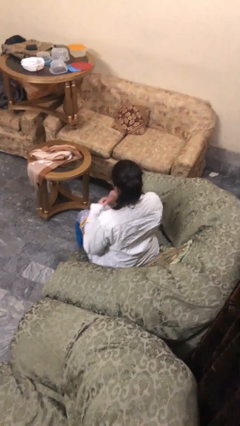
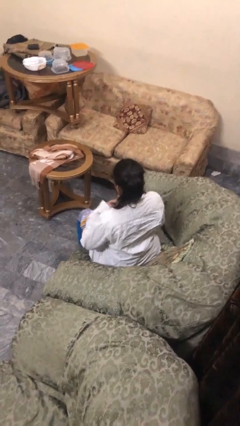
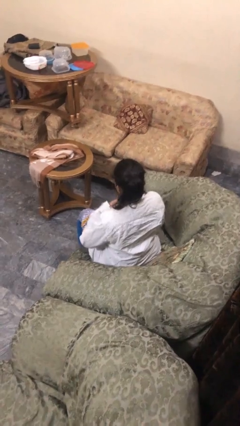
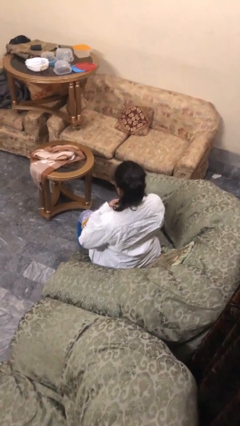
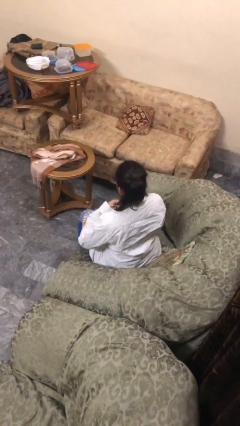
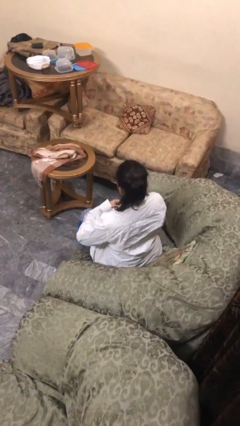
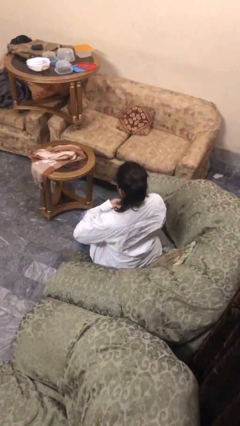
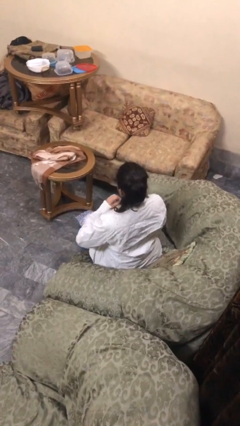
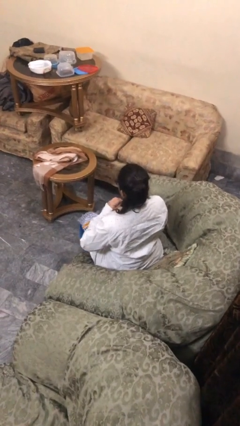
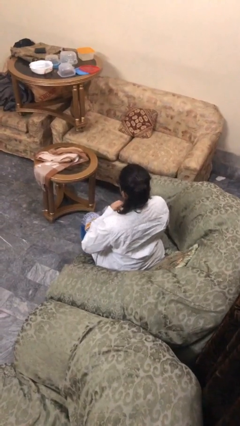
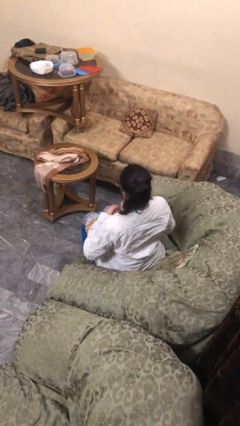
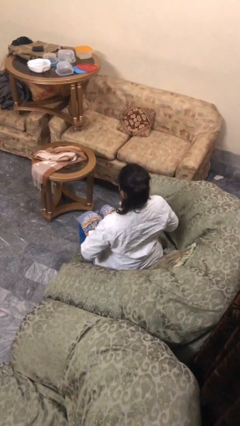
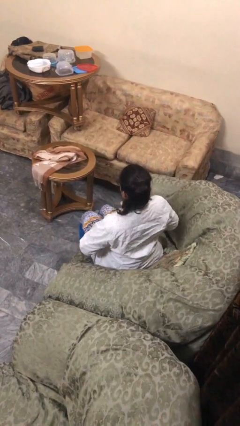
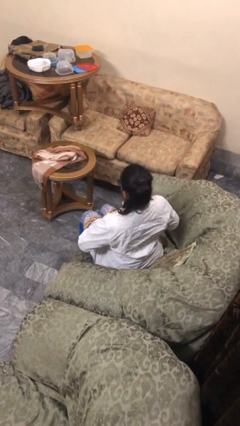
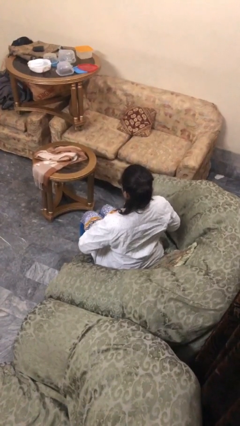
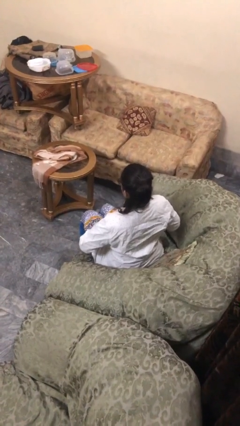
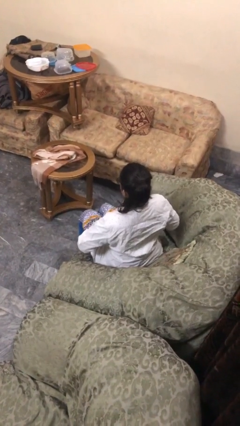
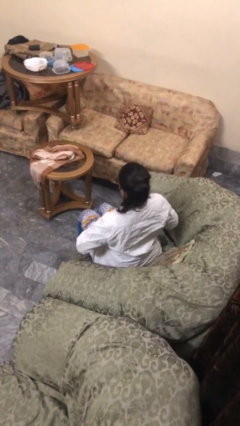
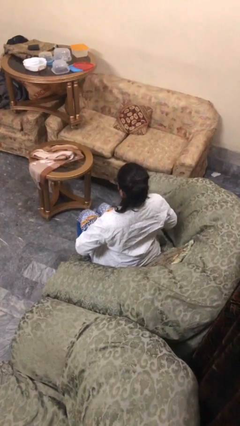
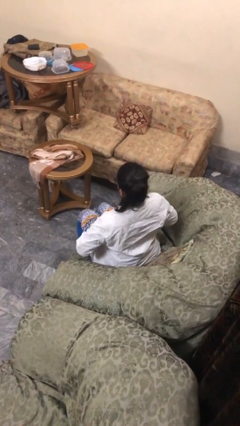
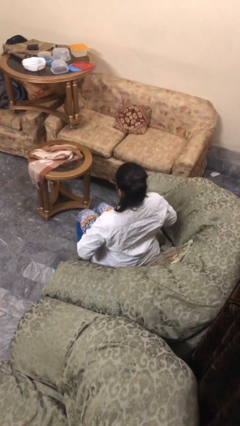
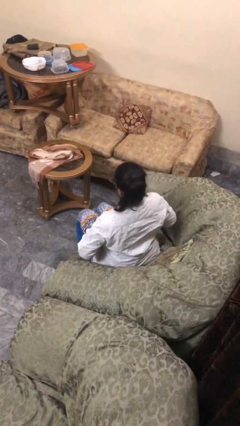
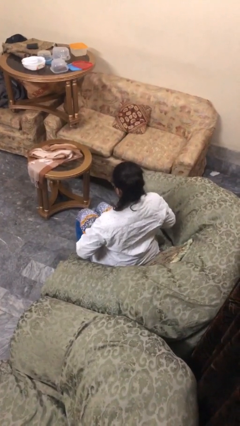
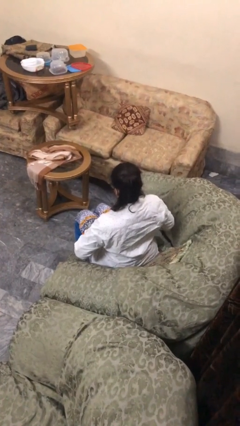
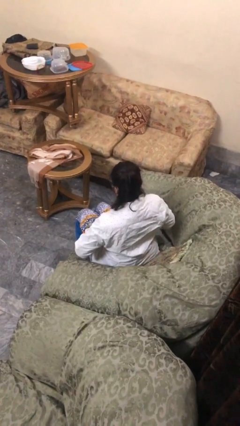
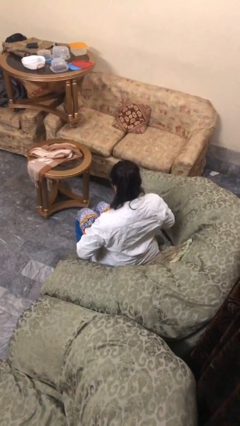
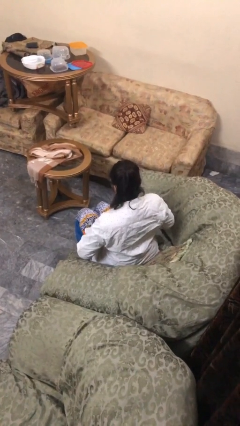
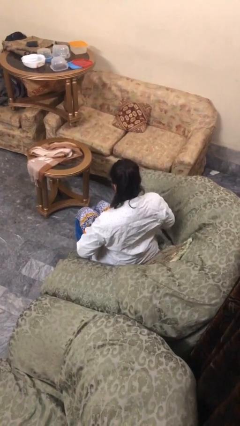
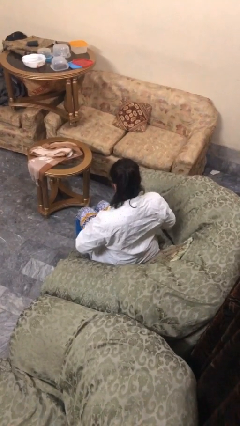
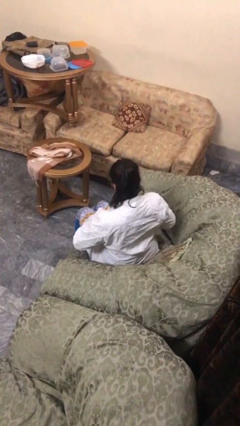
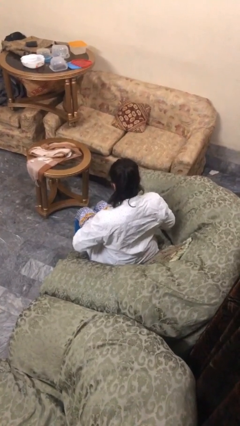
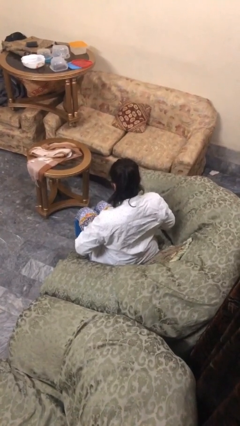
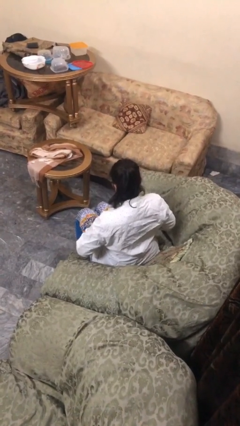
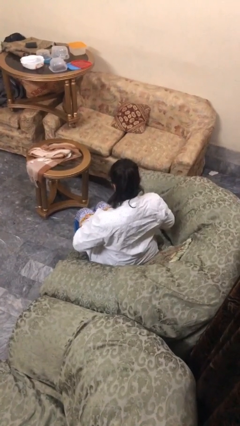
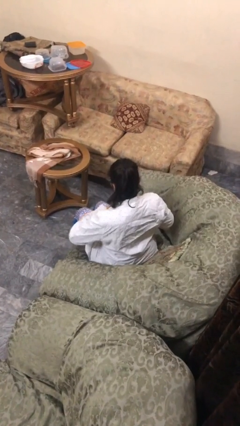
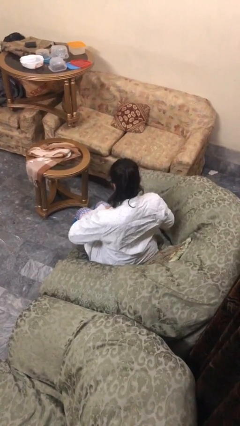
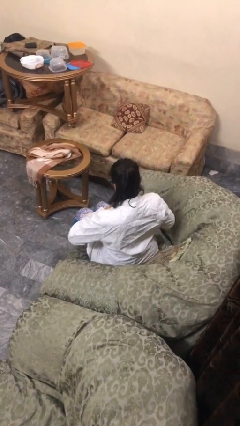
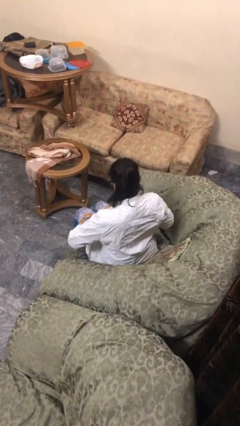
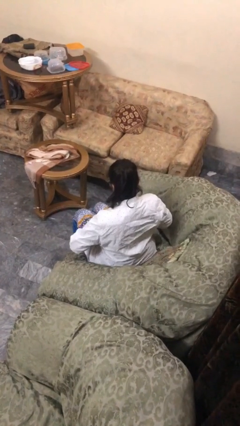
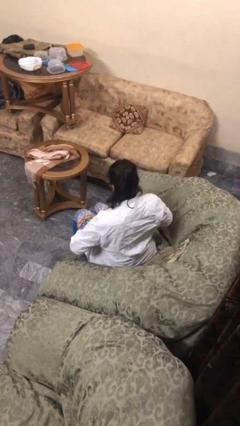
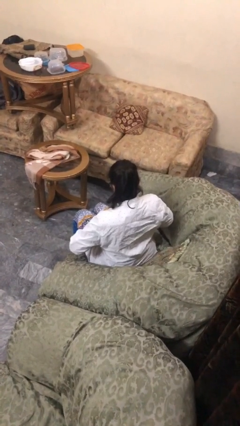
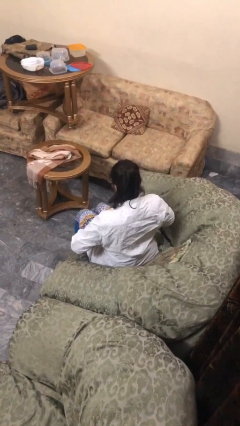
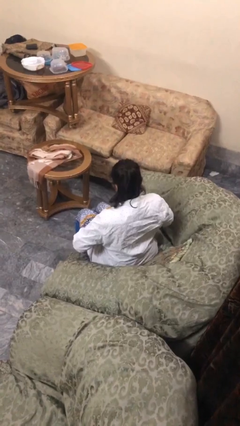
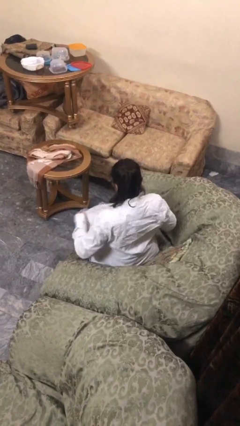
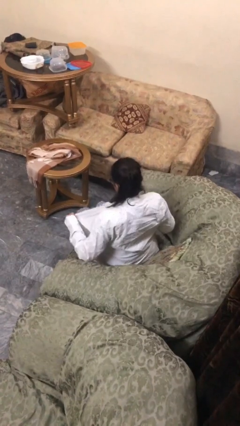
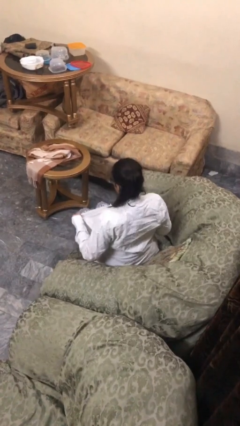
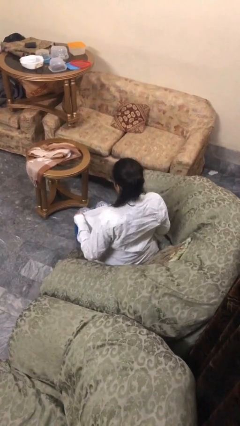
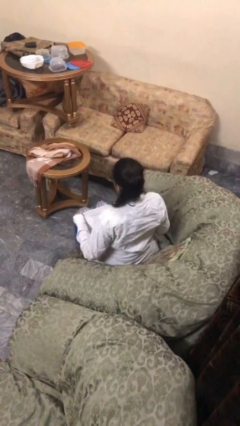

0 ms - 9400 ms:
person unbuttons shirt

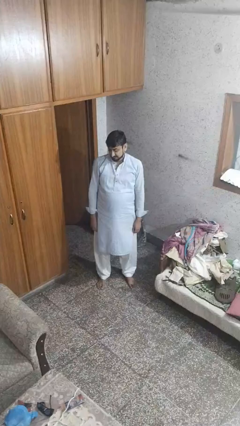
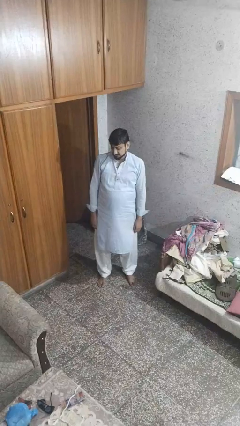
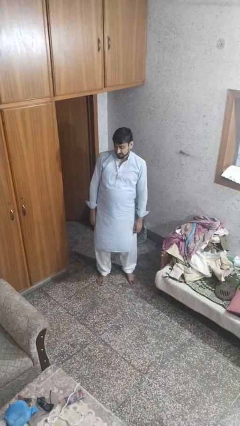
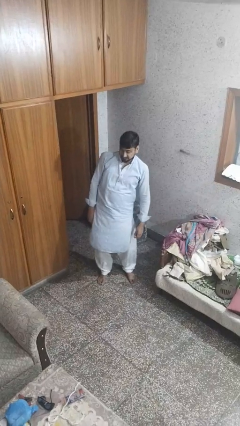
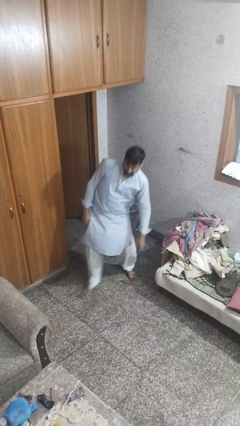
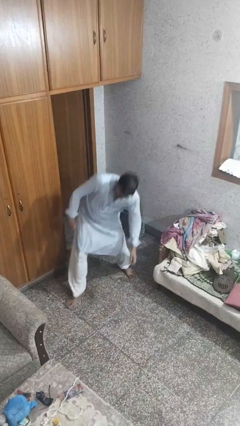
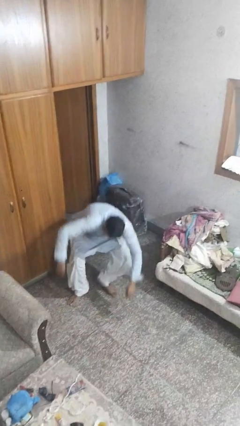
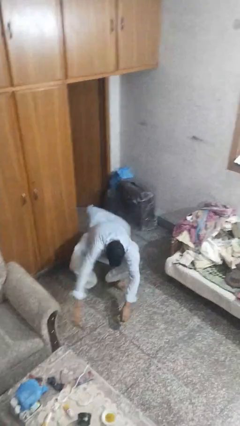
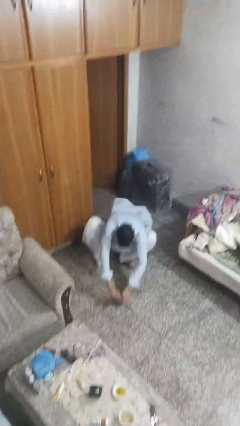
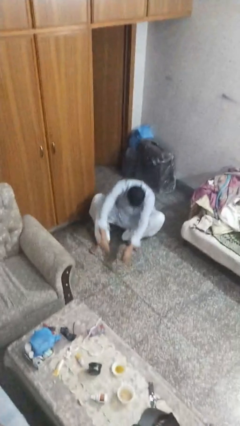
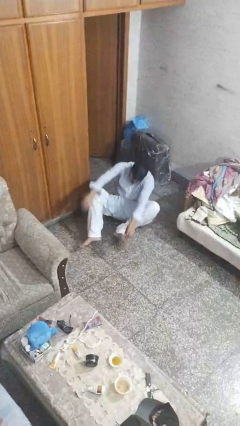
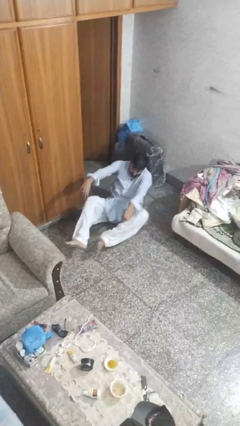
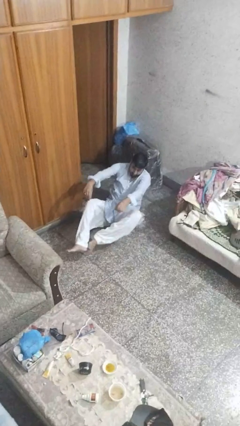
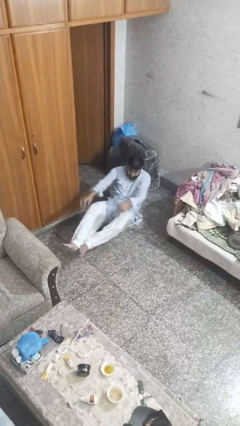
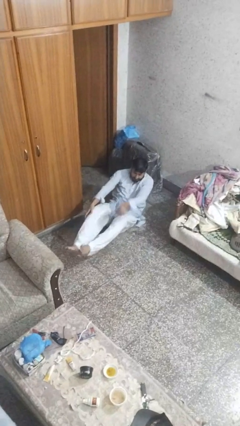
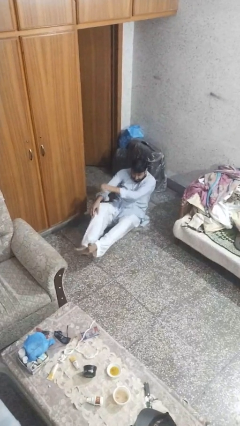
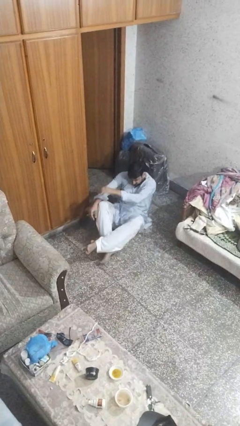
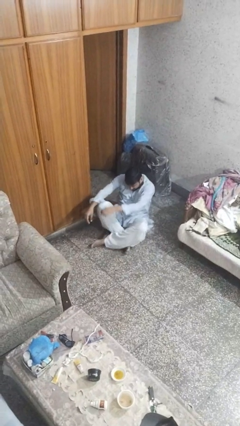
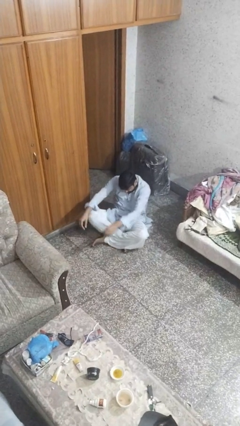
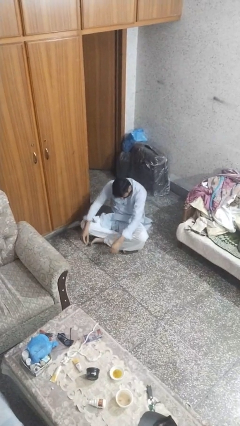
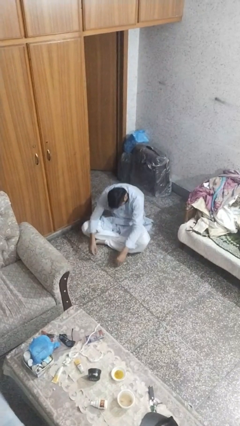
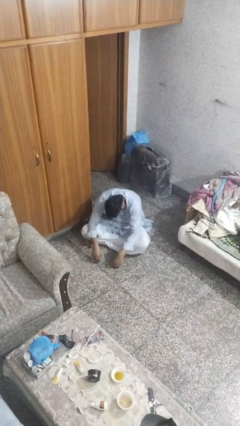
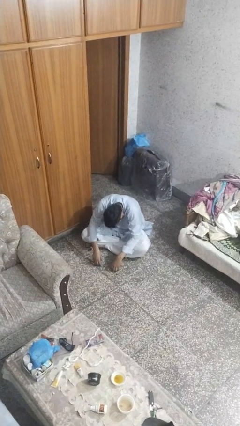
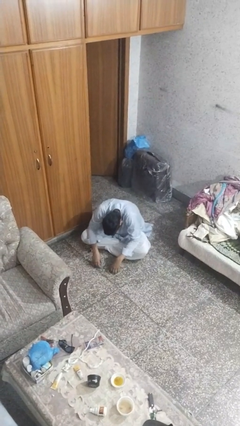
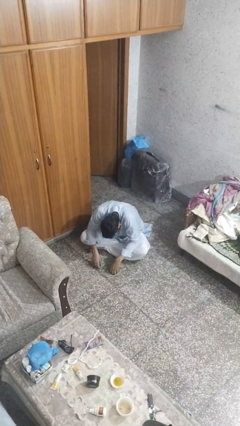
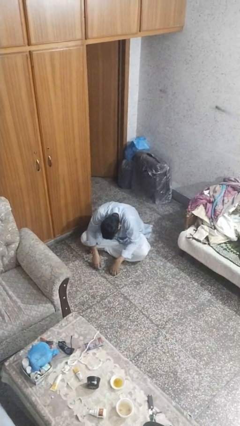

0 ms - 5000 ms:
person falls while standing

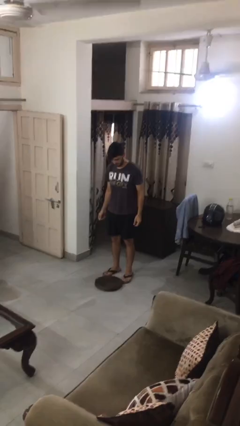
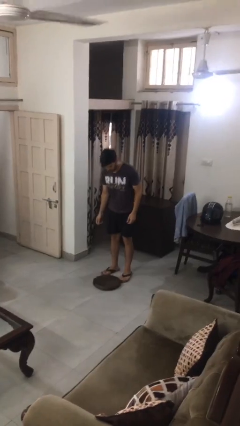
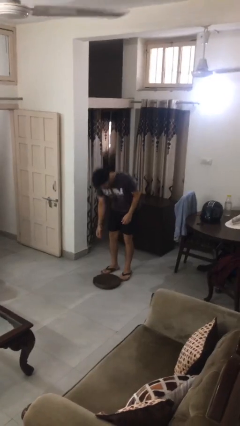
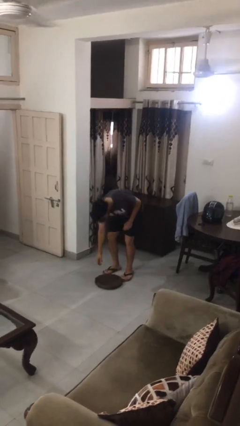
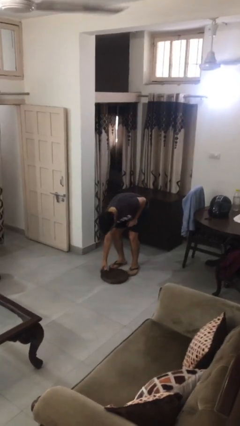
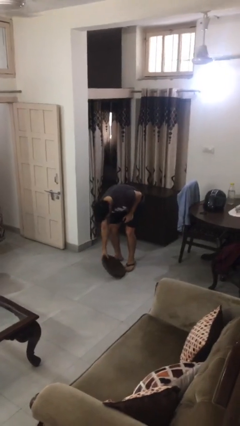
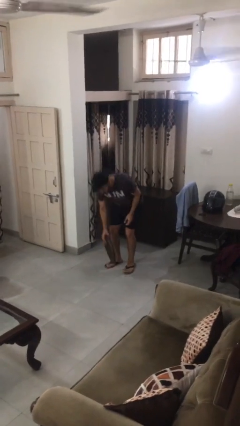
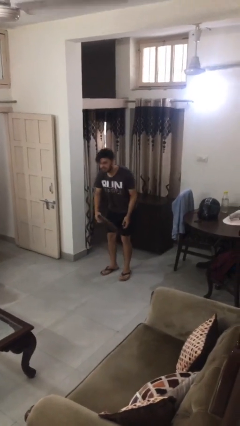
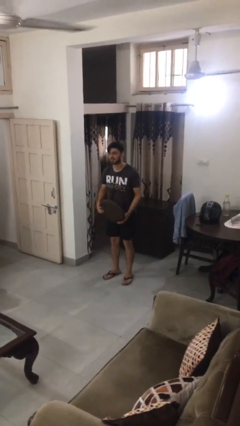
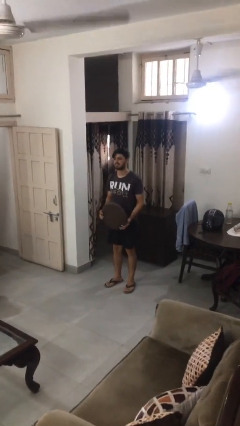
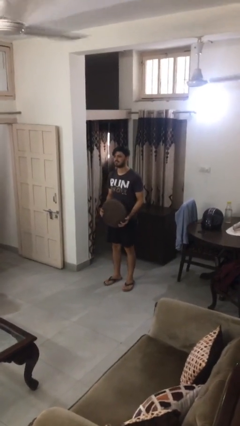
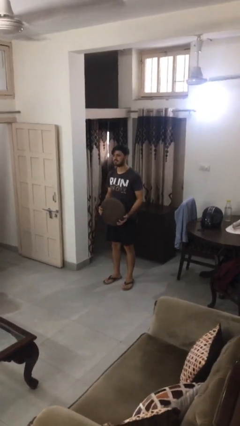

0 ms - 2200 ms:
person picks up object from floor

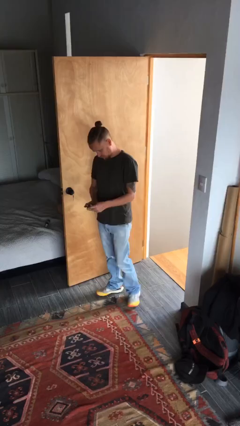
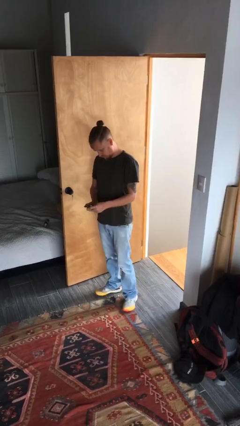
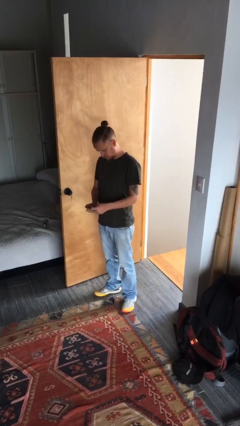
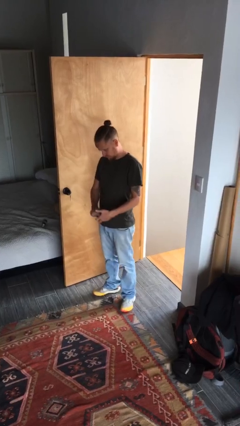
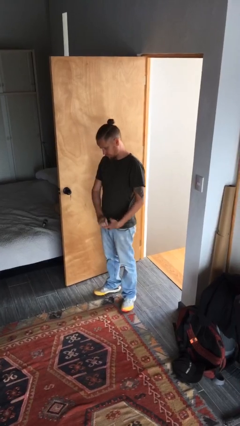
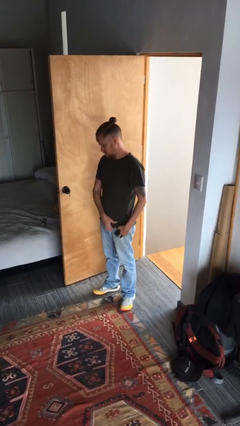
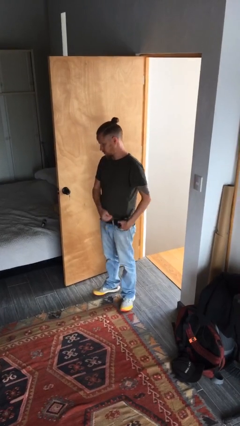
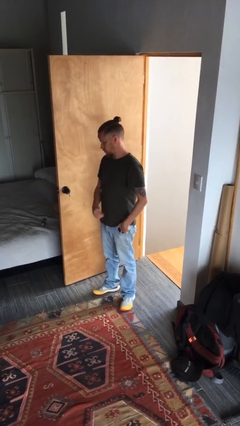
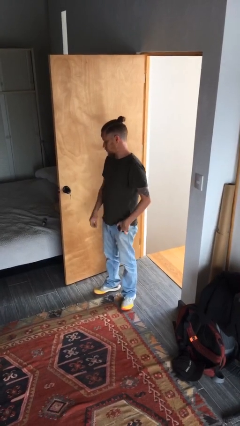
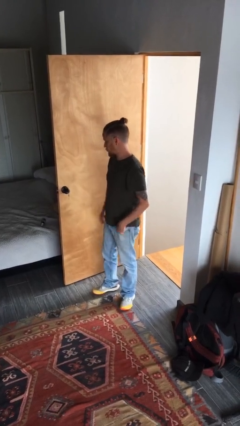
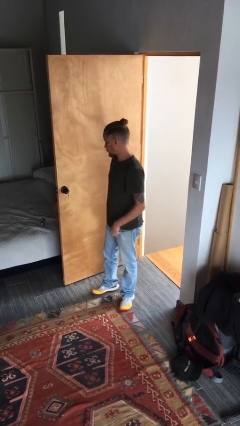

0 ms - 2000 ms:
person puts phone into pocket
